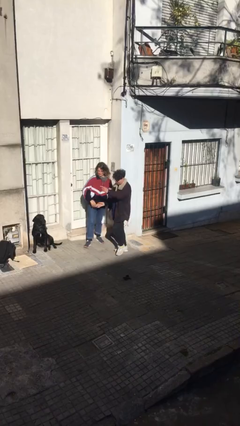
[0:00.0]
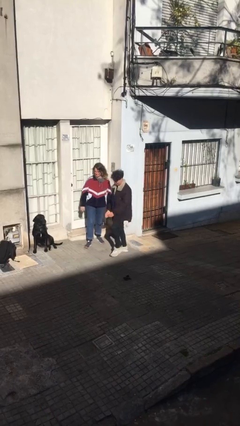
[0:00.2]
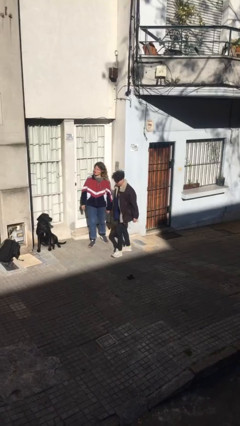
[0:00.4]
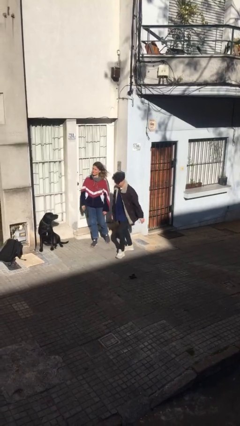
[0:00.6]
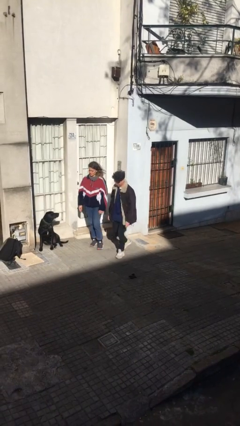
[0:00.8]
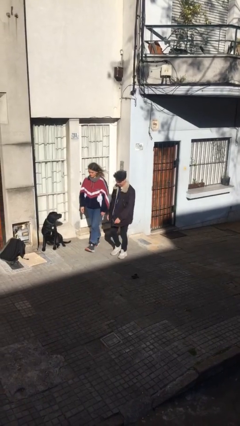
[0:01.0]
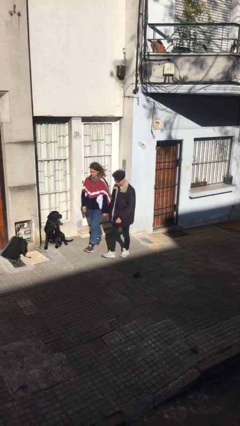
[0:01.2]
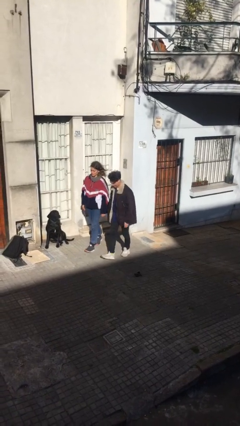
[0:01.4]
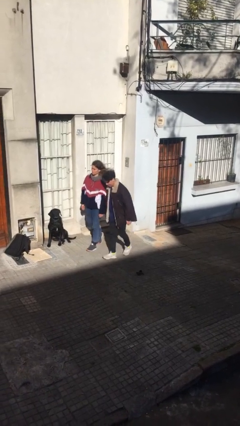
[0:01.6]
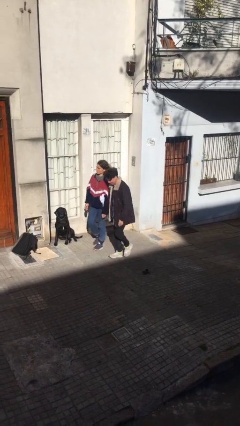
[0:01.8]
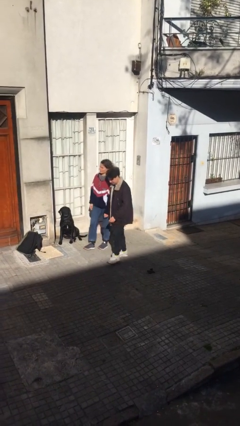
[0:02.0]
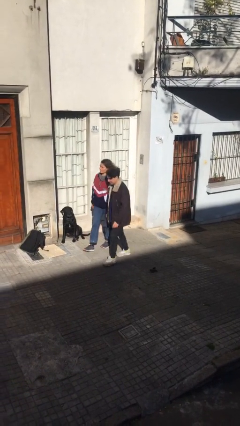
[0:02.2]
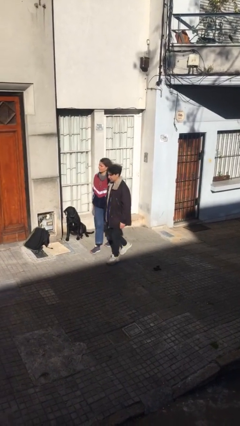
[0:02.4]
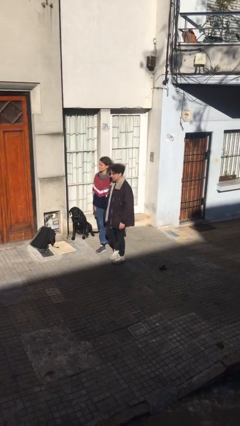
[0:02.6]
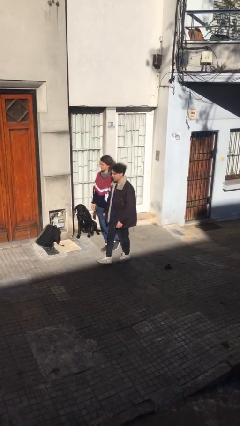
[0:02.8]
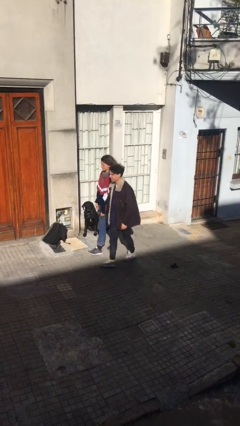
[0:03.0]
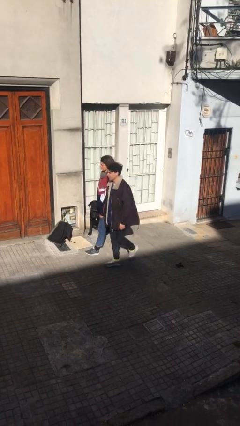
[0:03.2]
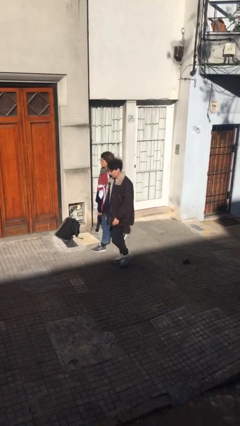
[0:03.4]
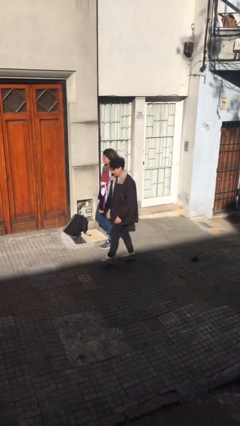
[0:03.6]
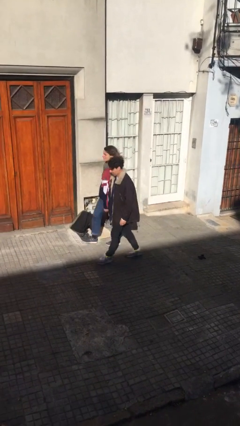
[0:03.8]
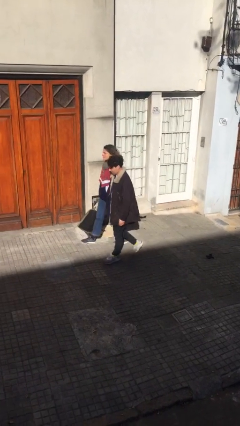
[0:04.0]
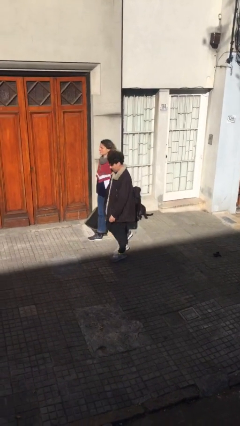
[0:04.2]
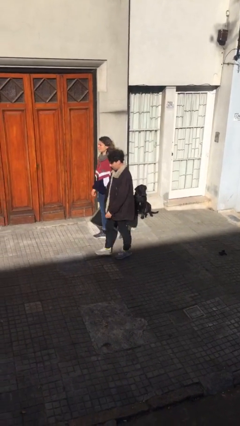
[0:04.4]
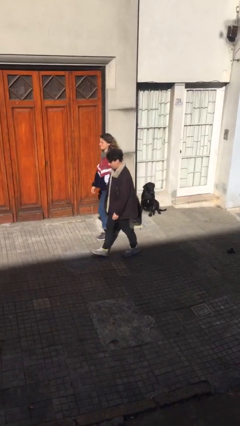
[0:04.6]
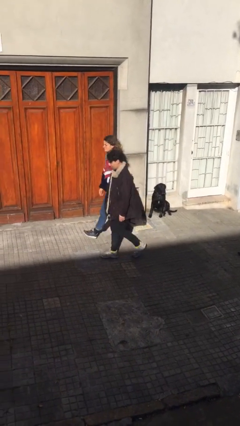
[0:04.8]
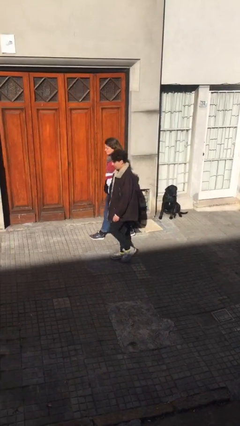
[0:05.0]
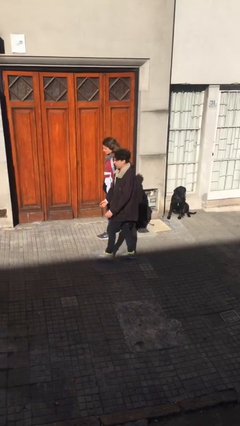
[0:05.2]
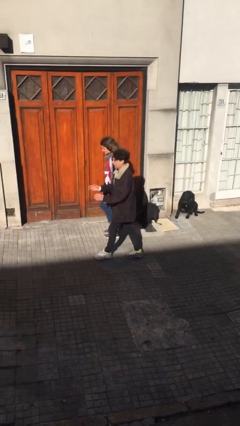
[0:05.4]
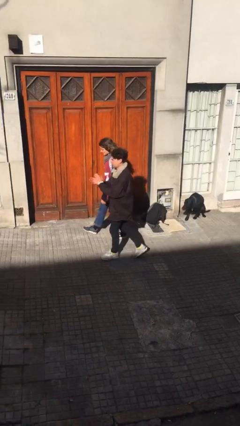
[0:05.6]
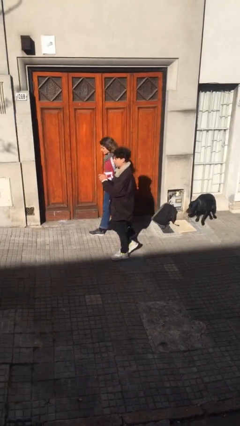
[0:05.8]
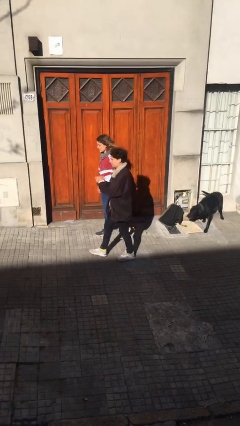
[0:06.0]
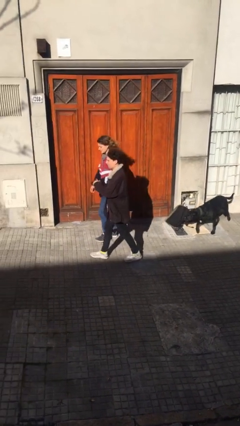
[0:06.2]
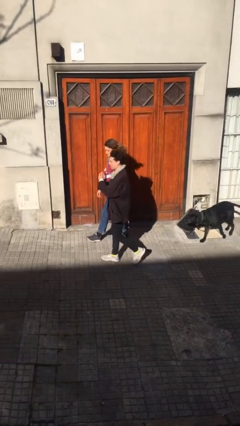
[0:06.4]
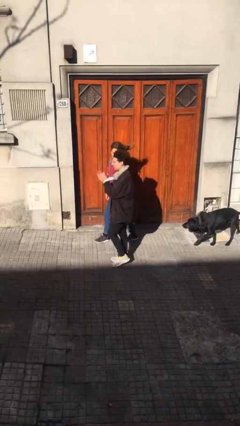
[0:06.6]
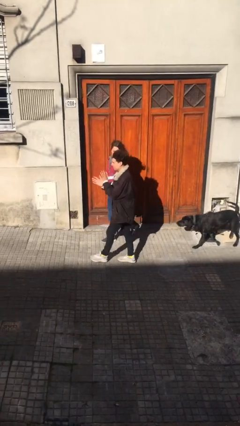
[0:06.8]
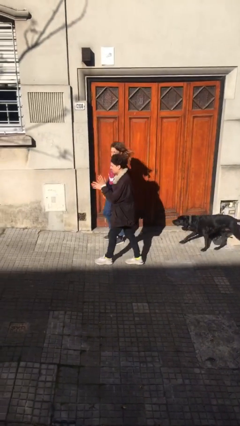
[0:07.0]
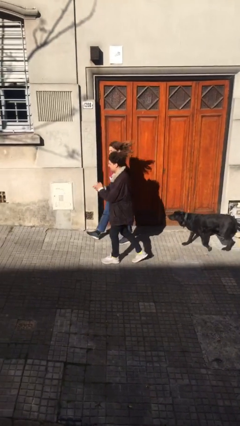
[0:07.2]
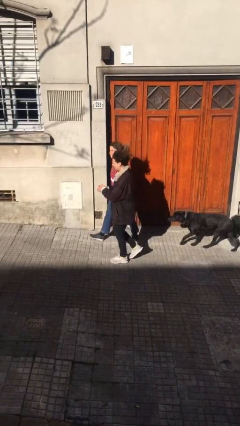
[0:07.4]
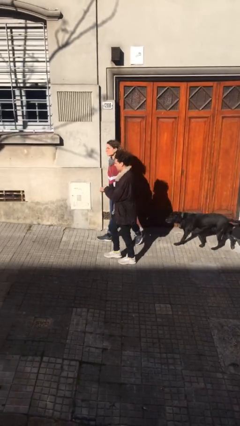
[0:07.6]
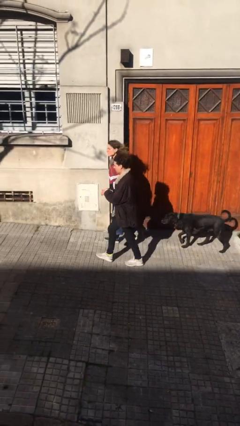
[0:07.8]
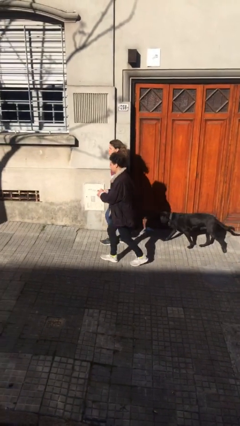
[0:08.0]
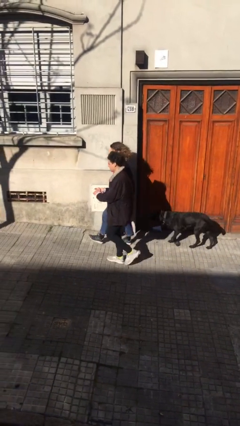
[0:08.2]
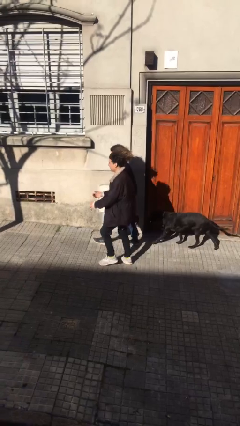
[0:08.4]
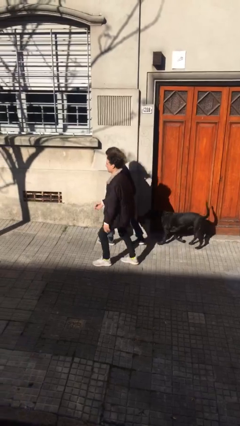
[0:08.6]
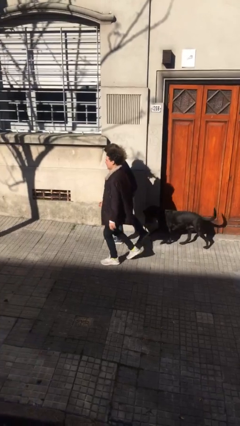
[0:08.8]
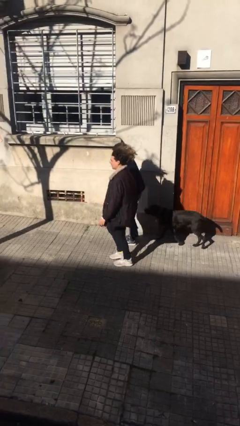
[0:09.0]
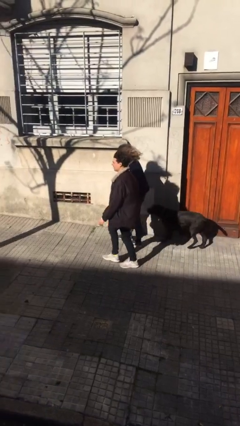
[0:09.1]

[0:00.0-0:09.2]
person talks to person

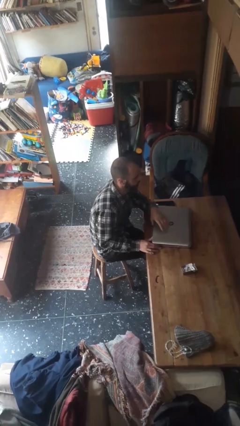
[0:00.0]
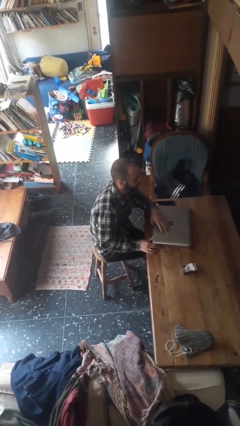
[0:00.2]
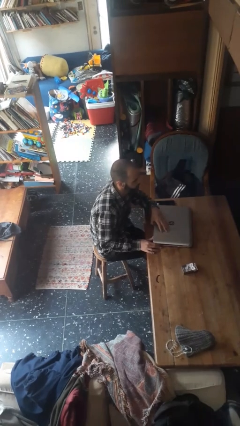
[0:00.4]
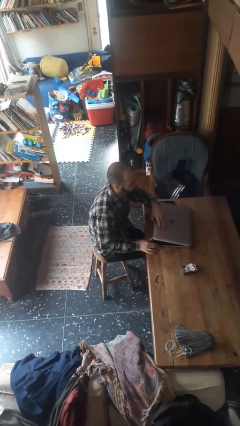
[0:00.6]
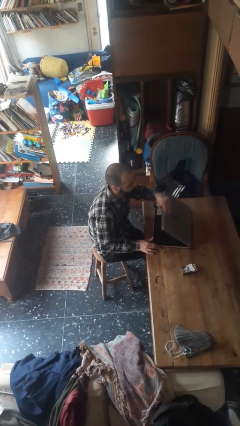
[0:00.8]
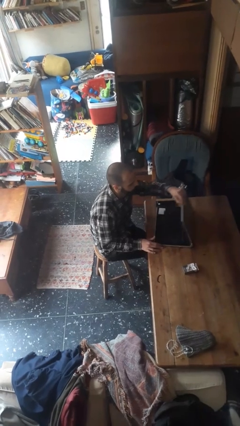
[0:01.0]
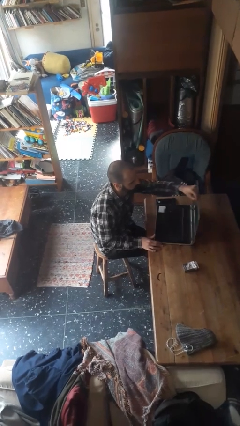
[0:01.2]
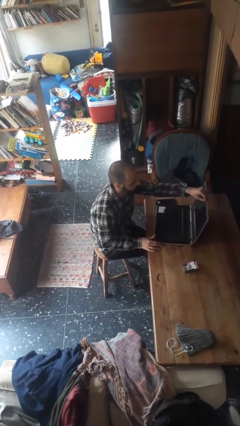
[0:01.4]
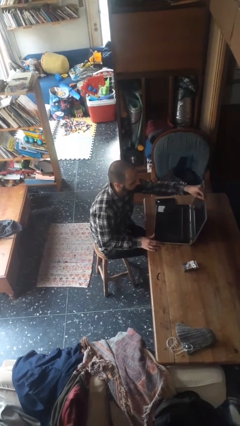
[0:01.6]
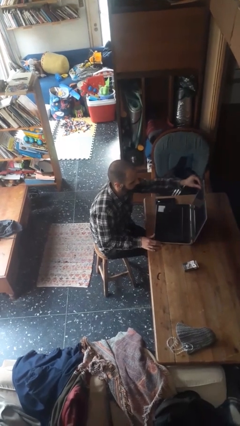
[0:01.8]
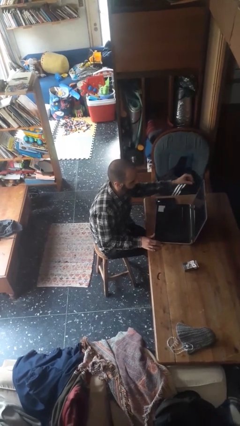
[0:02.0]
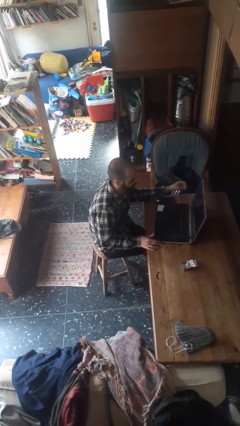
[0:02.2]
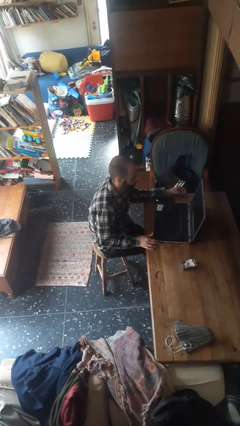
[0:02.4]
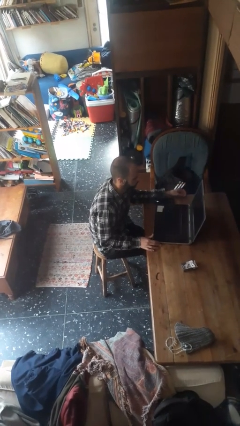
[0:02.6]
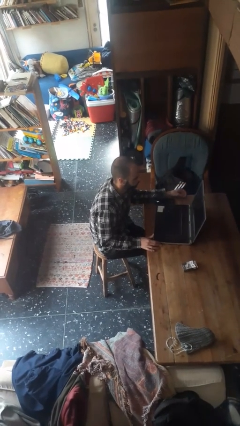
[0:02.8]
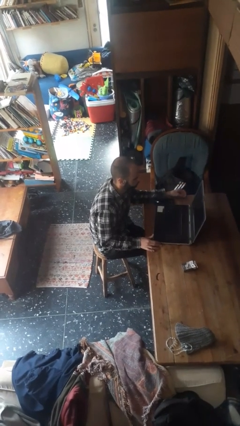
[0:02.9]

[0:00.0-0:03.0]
person opens laptop

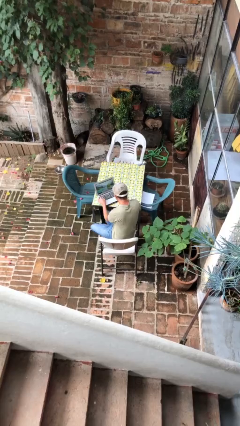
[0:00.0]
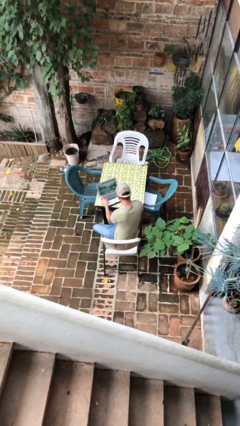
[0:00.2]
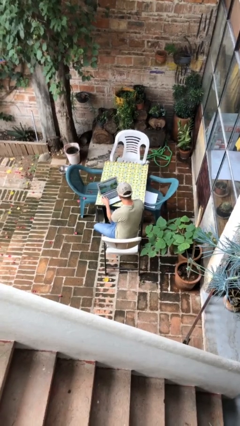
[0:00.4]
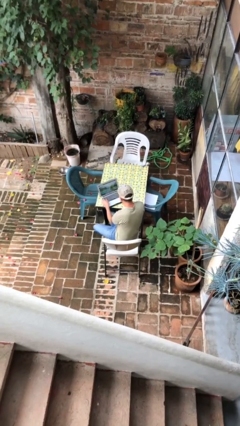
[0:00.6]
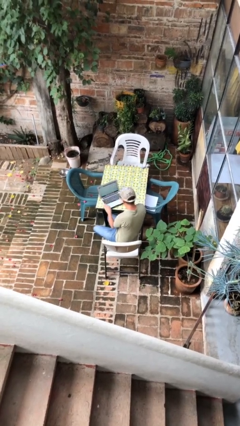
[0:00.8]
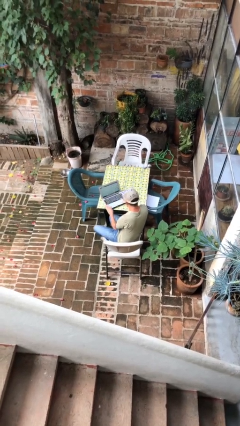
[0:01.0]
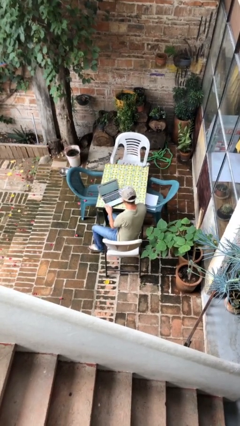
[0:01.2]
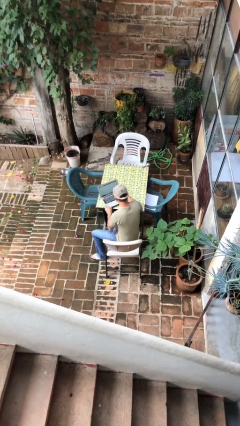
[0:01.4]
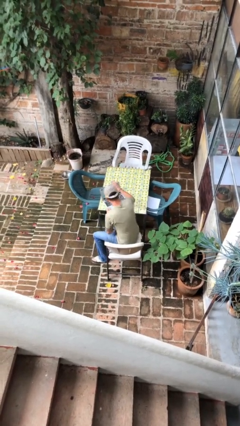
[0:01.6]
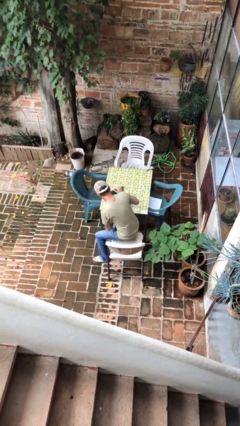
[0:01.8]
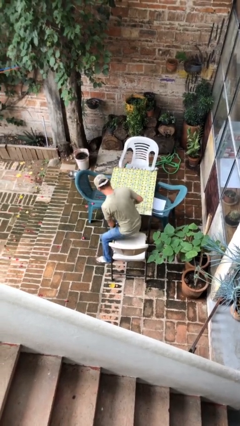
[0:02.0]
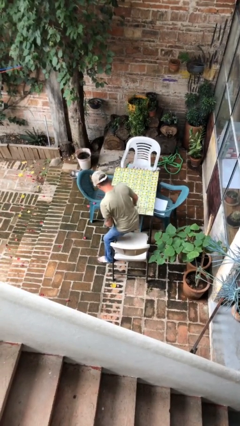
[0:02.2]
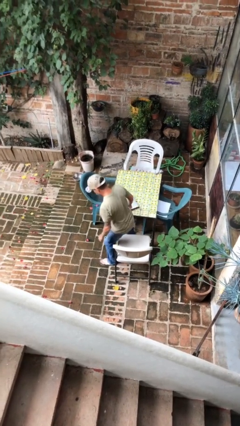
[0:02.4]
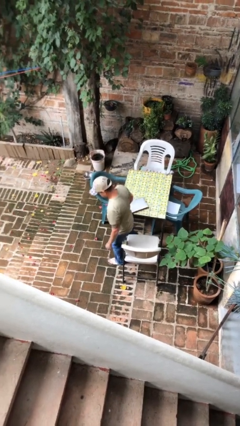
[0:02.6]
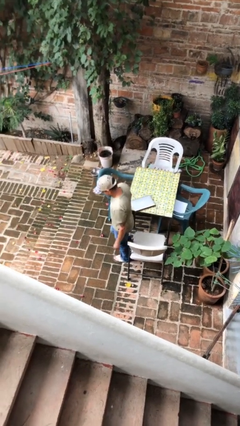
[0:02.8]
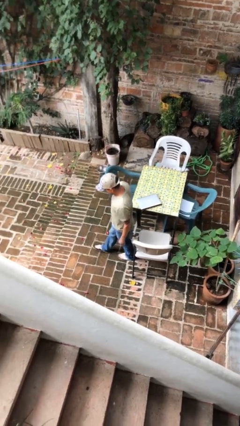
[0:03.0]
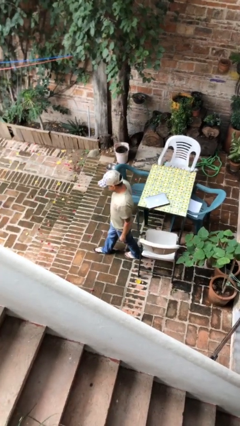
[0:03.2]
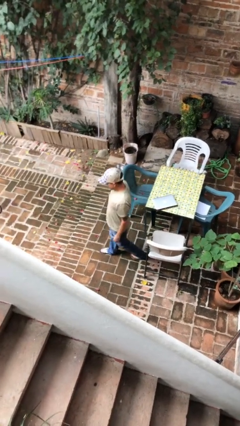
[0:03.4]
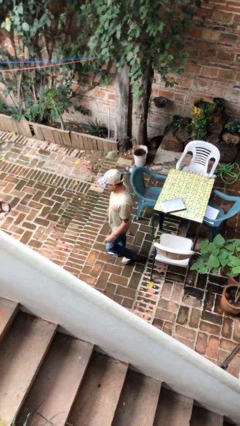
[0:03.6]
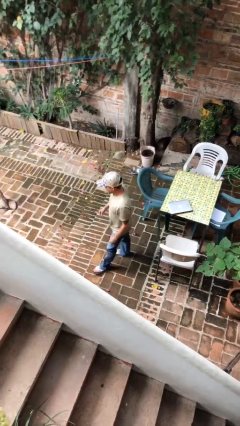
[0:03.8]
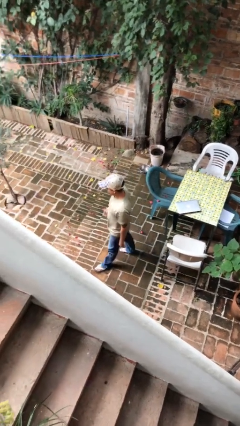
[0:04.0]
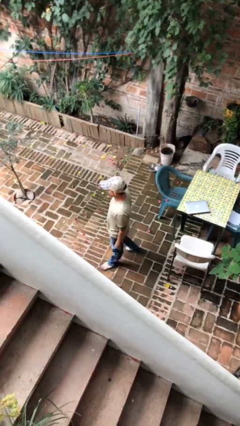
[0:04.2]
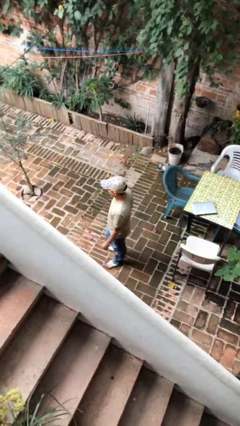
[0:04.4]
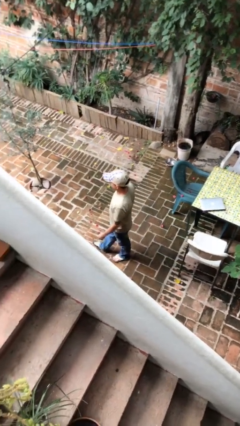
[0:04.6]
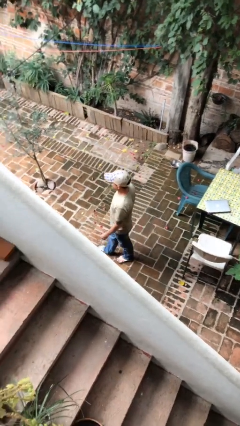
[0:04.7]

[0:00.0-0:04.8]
person stands up

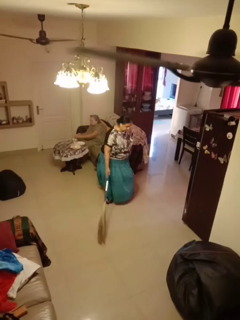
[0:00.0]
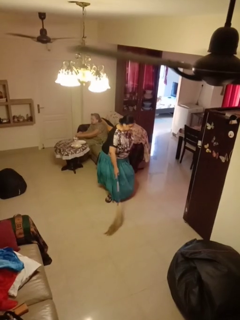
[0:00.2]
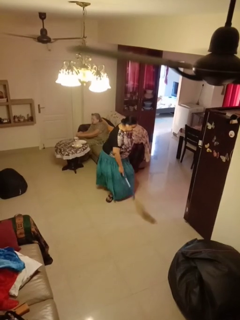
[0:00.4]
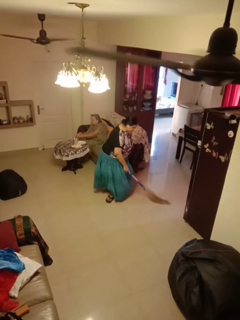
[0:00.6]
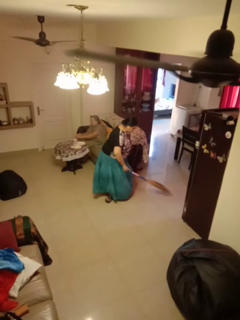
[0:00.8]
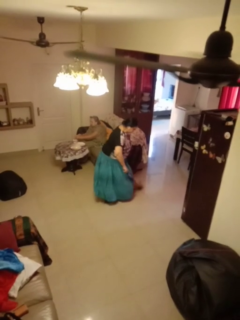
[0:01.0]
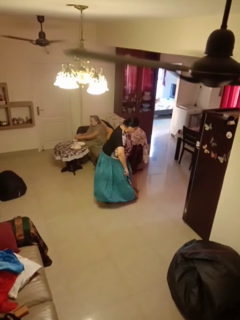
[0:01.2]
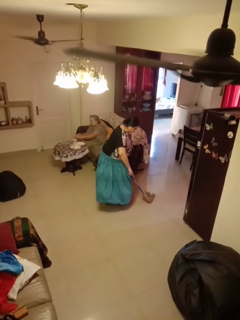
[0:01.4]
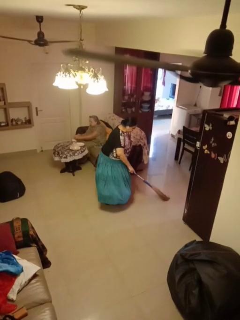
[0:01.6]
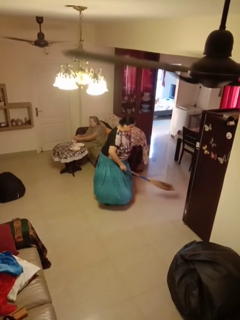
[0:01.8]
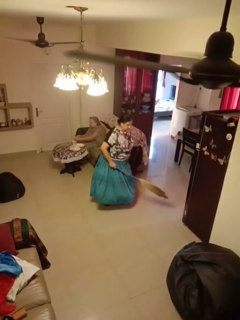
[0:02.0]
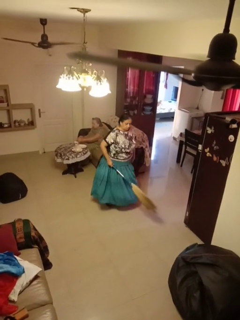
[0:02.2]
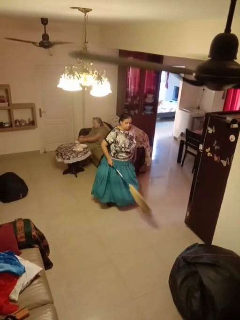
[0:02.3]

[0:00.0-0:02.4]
person sweeps floor
